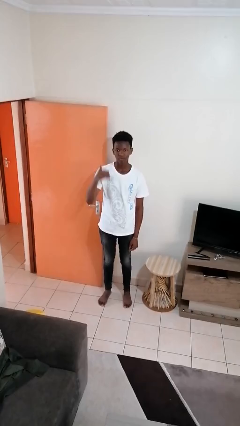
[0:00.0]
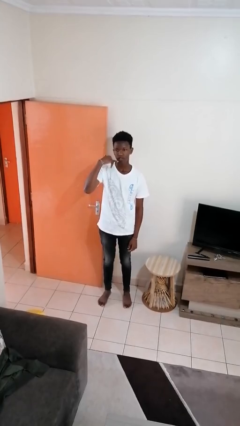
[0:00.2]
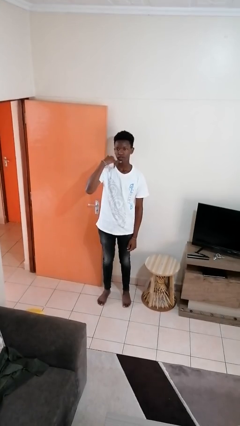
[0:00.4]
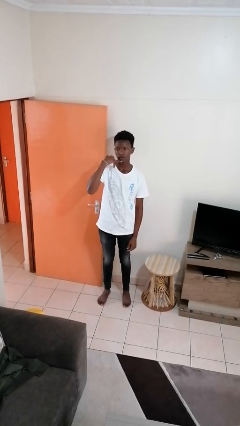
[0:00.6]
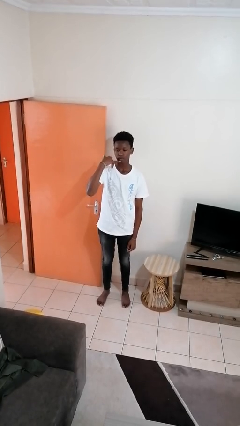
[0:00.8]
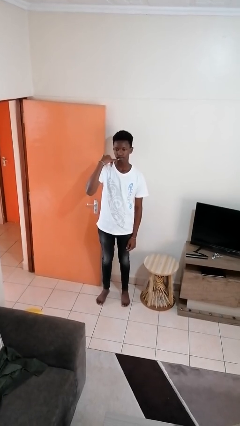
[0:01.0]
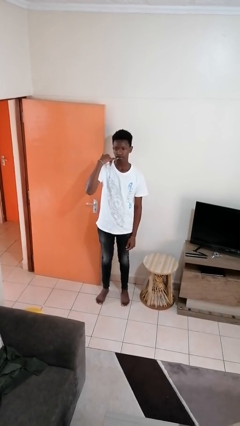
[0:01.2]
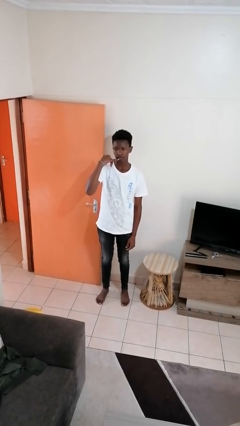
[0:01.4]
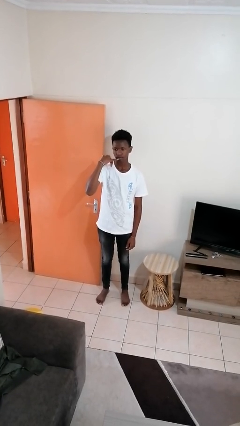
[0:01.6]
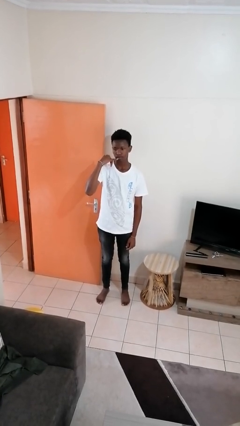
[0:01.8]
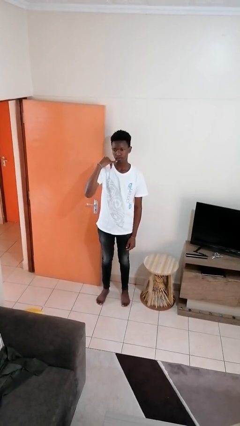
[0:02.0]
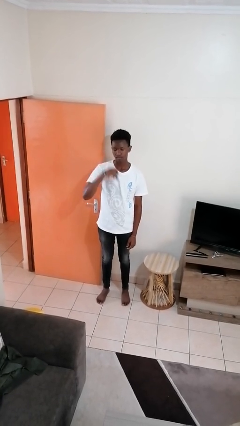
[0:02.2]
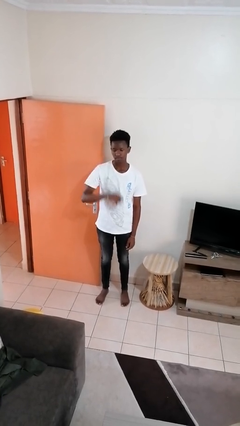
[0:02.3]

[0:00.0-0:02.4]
person gestures call me

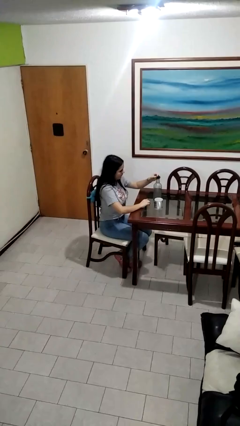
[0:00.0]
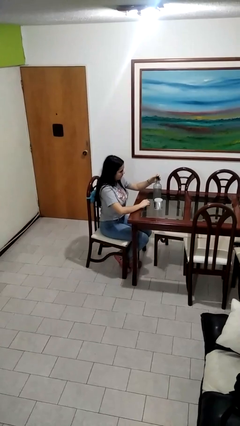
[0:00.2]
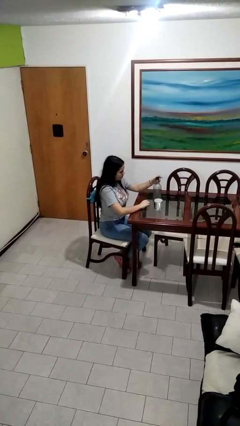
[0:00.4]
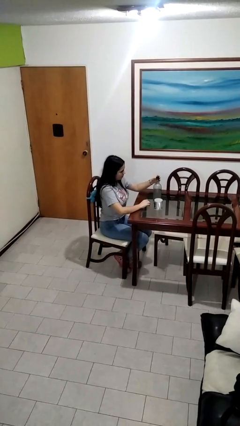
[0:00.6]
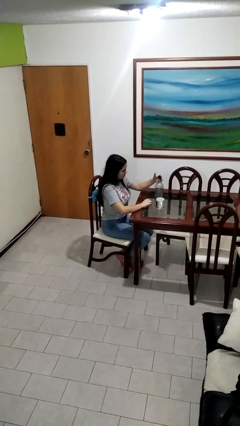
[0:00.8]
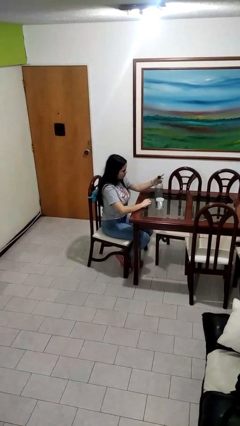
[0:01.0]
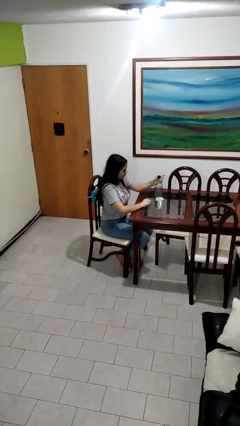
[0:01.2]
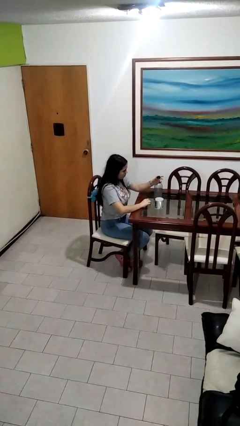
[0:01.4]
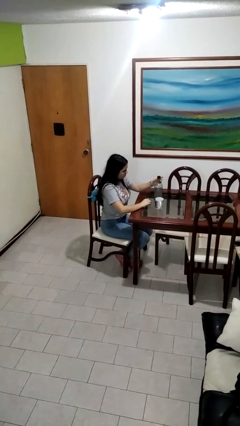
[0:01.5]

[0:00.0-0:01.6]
person screws lid to bottle

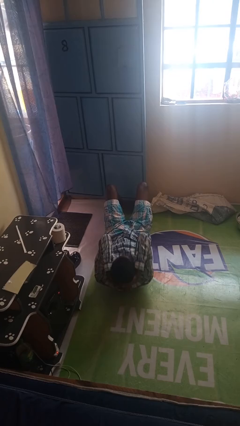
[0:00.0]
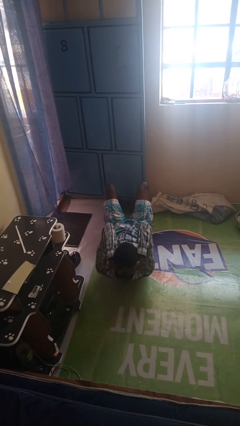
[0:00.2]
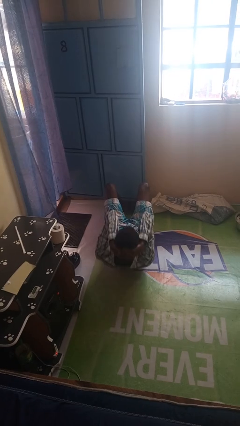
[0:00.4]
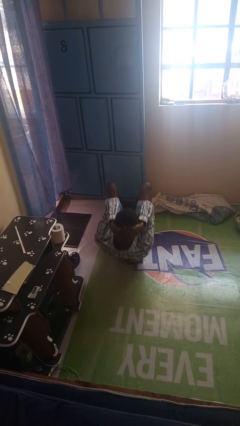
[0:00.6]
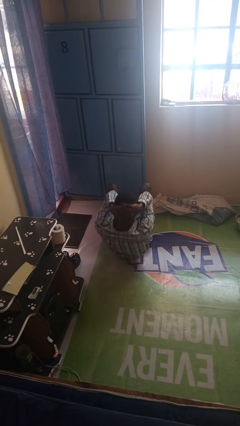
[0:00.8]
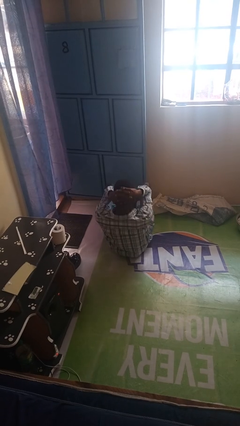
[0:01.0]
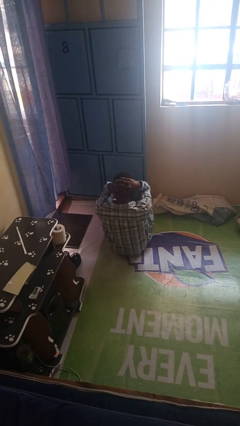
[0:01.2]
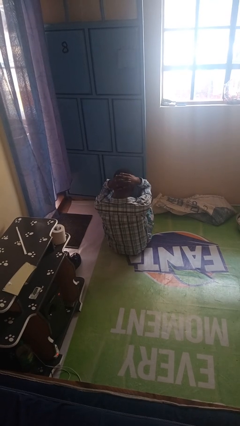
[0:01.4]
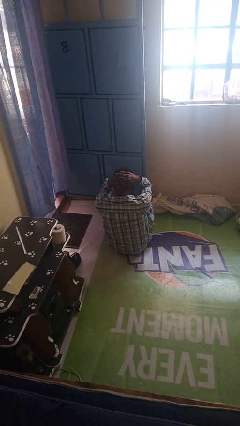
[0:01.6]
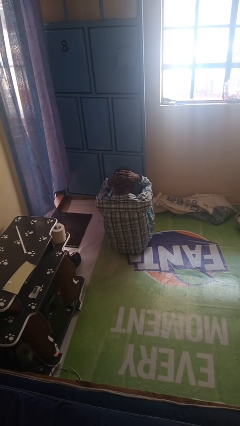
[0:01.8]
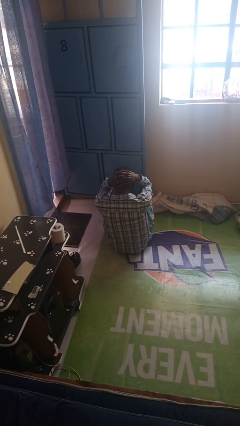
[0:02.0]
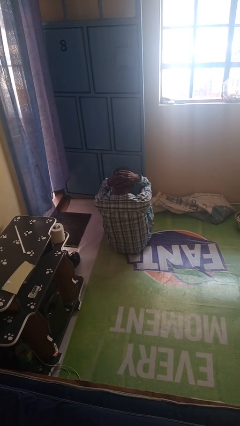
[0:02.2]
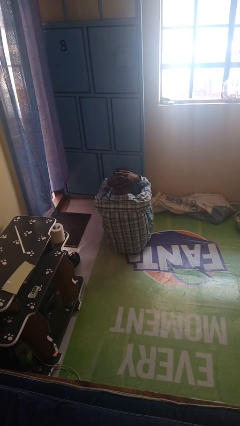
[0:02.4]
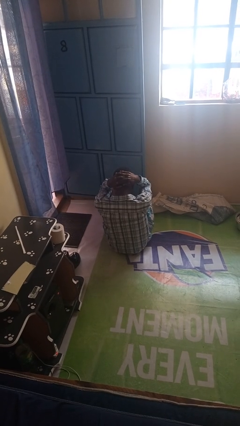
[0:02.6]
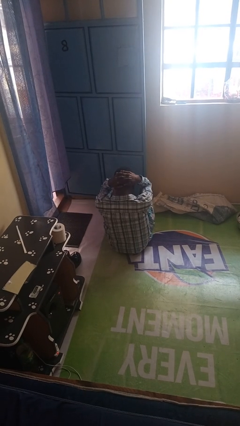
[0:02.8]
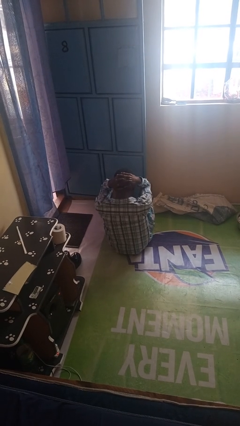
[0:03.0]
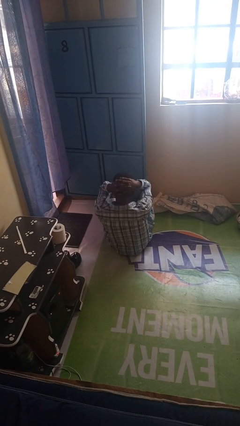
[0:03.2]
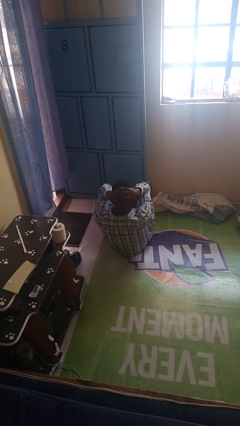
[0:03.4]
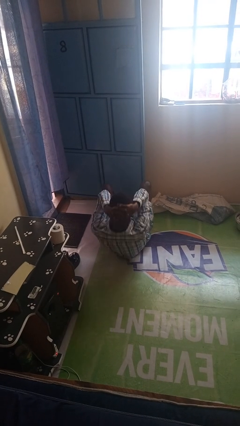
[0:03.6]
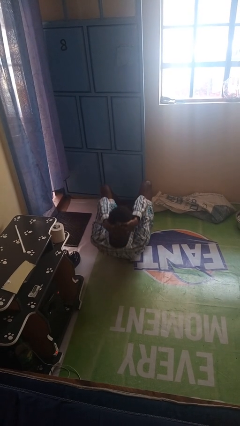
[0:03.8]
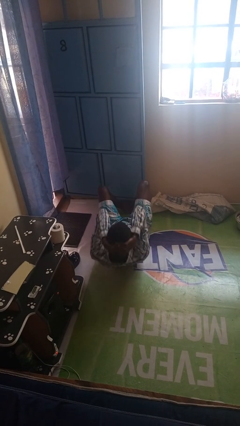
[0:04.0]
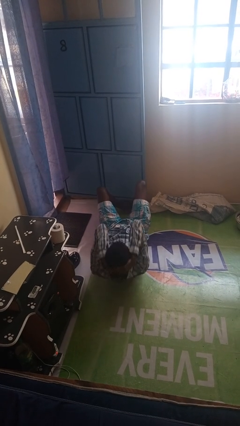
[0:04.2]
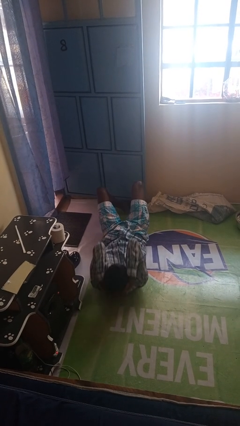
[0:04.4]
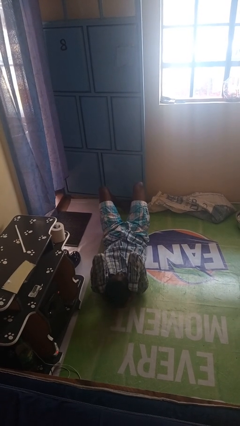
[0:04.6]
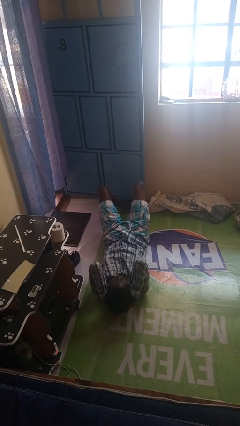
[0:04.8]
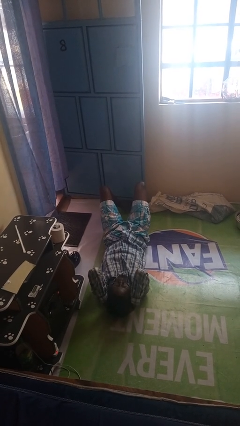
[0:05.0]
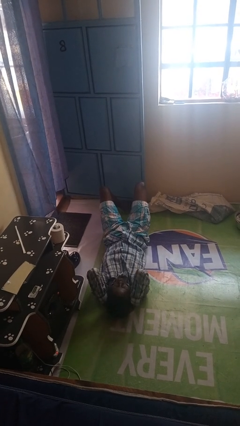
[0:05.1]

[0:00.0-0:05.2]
person exercises with situp

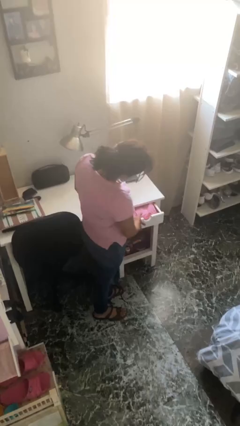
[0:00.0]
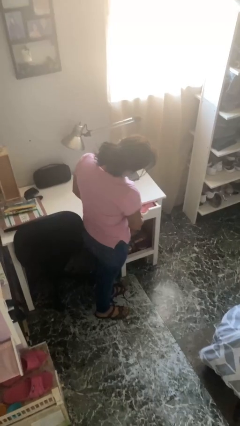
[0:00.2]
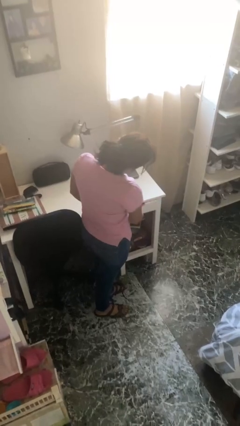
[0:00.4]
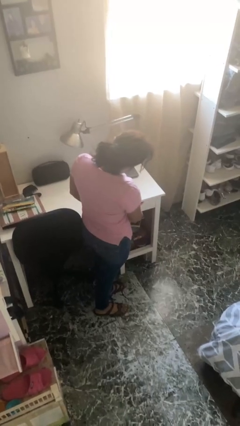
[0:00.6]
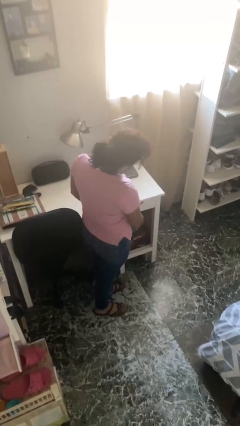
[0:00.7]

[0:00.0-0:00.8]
person closes dresser drawer

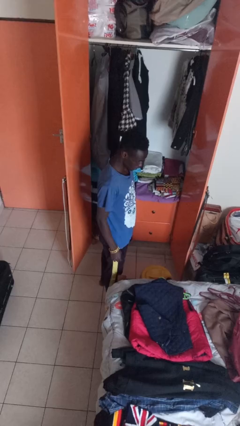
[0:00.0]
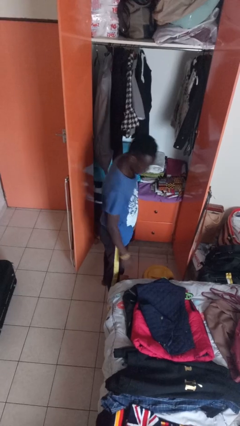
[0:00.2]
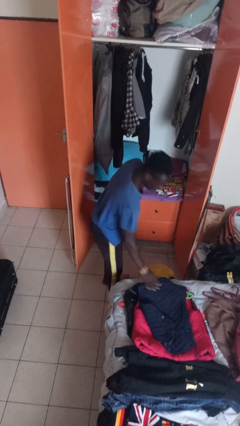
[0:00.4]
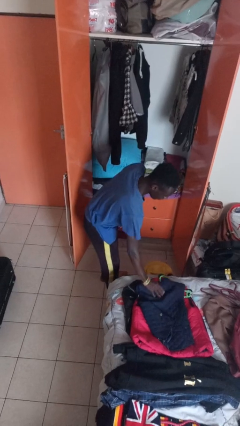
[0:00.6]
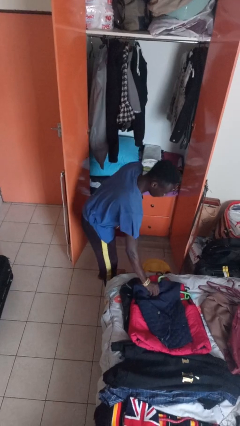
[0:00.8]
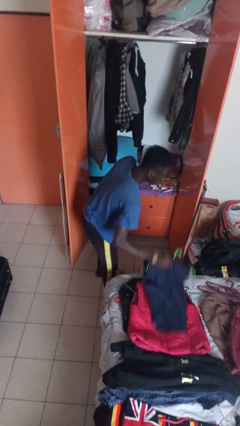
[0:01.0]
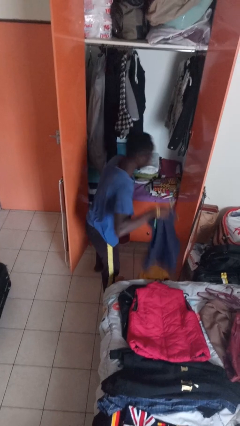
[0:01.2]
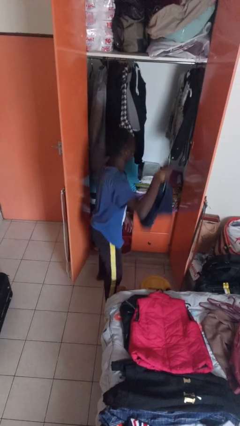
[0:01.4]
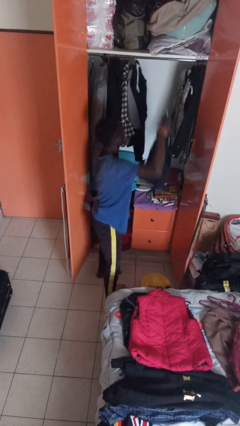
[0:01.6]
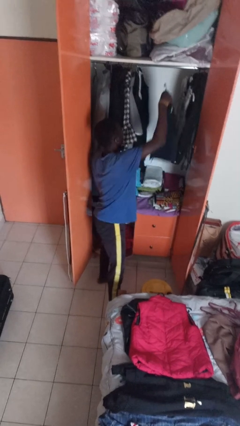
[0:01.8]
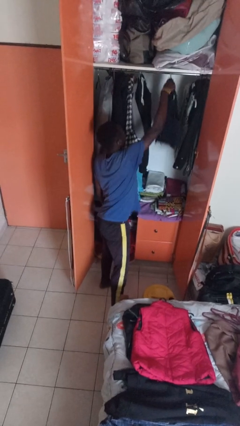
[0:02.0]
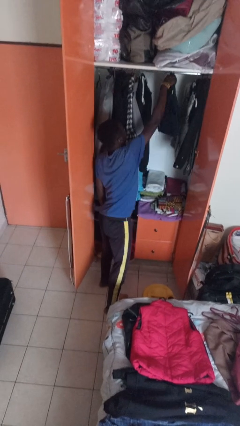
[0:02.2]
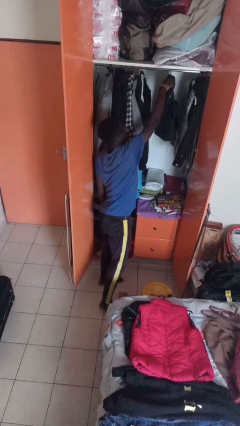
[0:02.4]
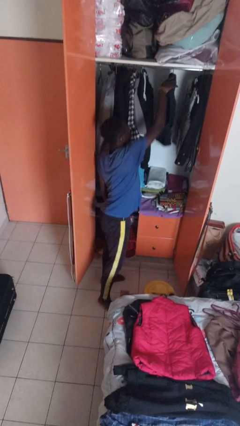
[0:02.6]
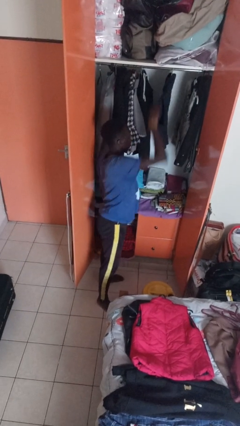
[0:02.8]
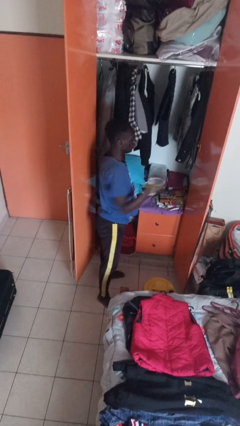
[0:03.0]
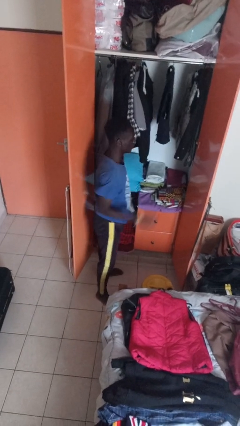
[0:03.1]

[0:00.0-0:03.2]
person puts clothes into closet

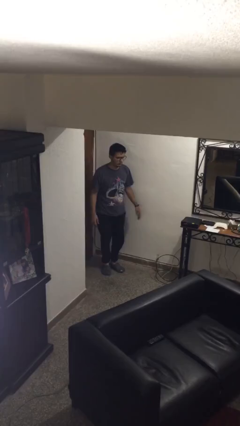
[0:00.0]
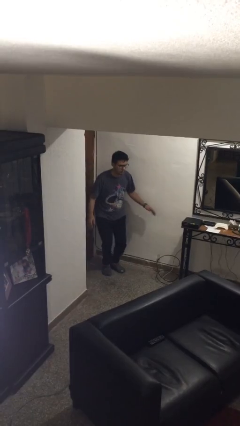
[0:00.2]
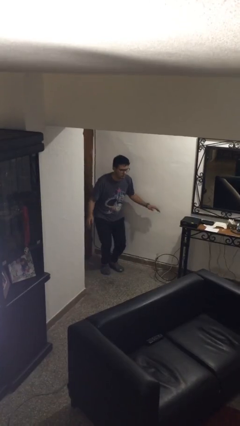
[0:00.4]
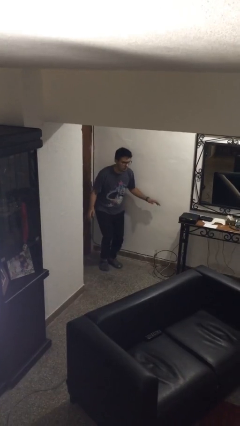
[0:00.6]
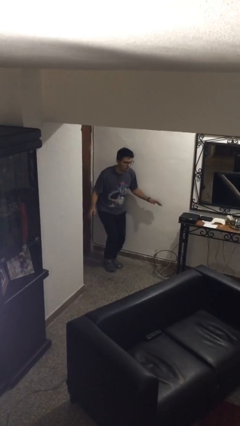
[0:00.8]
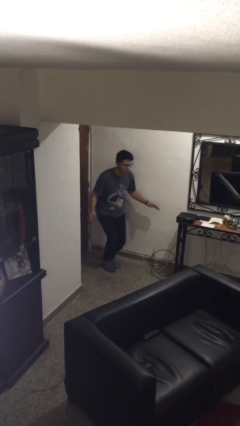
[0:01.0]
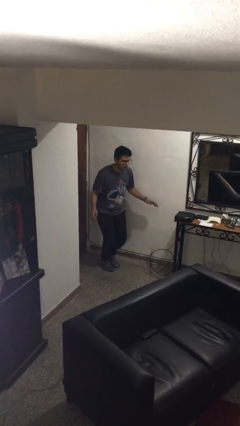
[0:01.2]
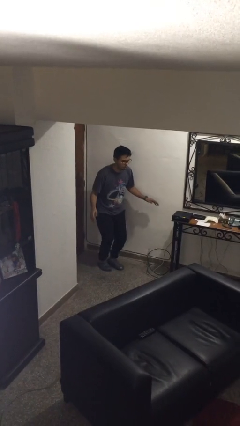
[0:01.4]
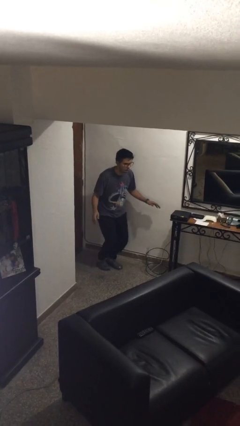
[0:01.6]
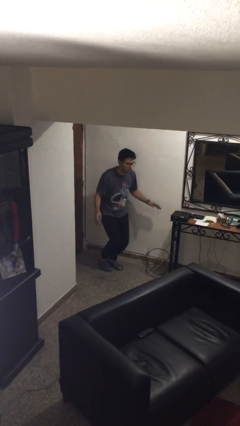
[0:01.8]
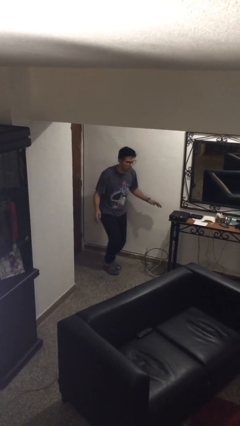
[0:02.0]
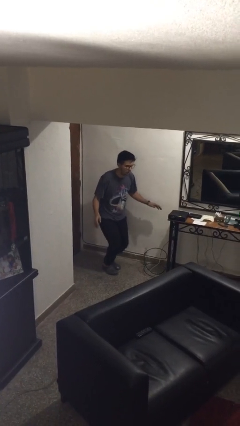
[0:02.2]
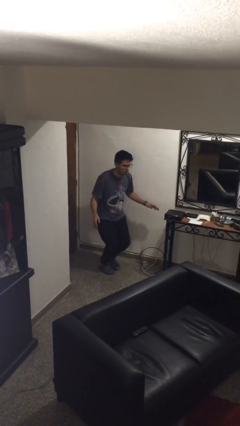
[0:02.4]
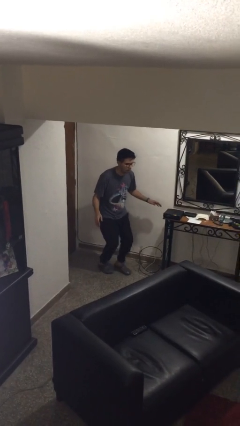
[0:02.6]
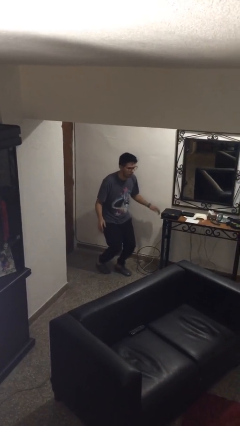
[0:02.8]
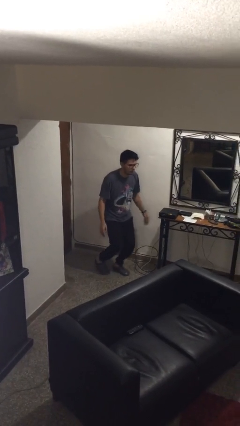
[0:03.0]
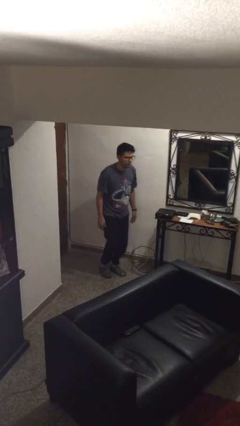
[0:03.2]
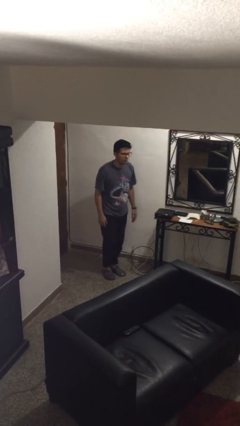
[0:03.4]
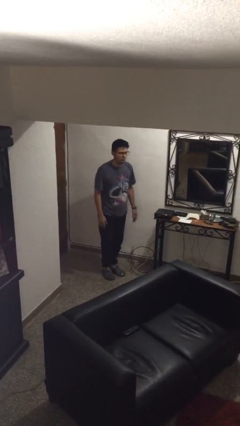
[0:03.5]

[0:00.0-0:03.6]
person walks tiptoe

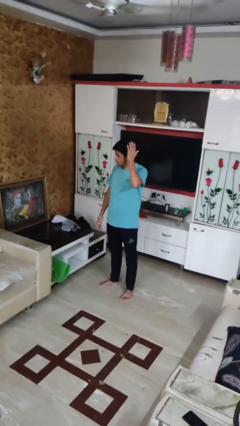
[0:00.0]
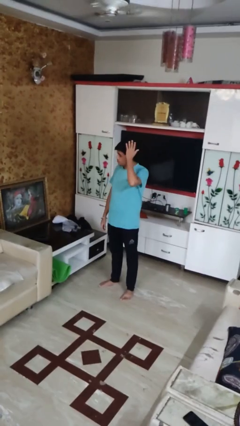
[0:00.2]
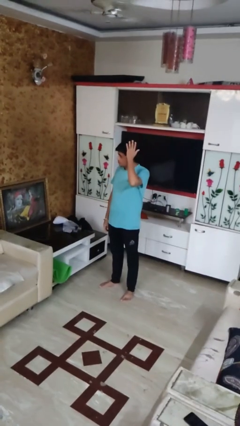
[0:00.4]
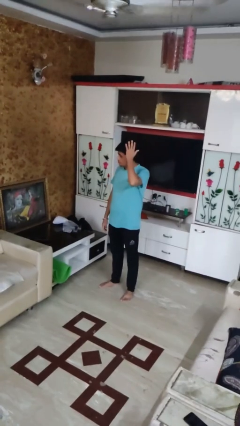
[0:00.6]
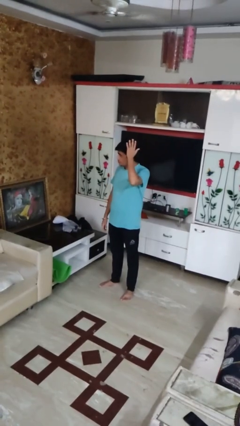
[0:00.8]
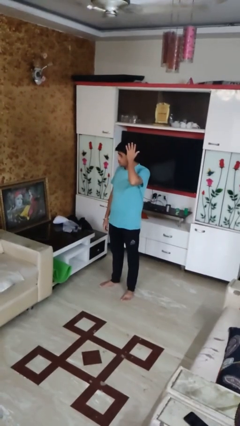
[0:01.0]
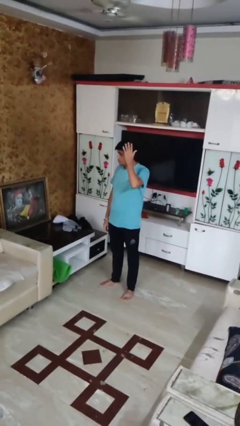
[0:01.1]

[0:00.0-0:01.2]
person pats head
